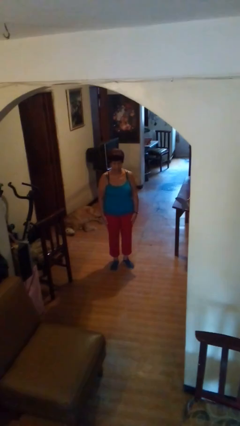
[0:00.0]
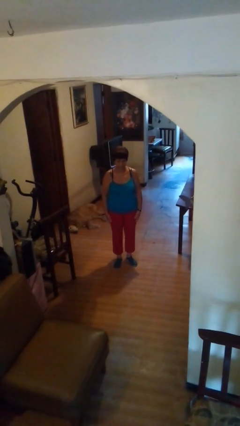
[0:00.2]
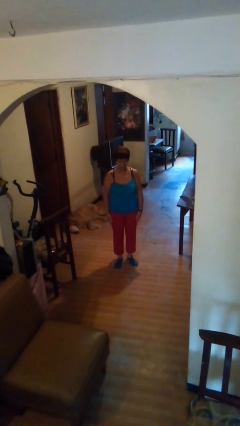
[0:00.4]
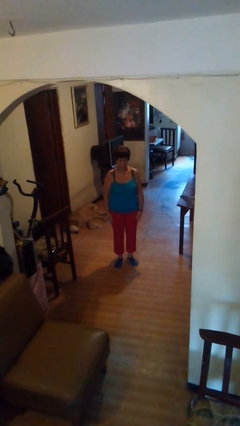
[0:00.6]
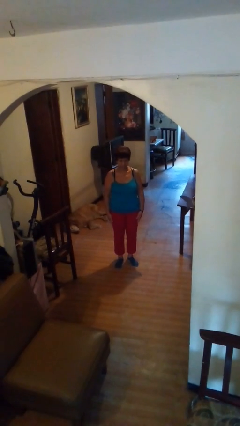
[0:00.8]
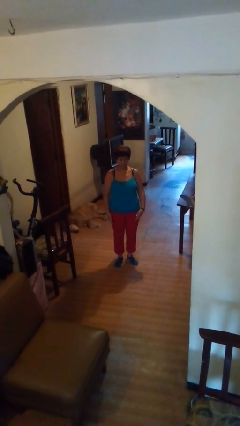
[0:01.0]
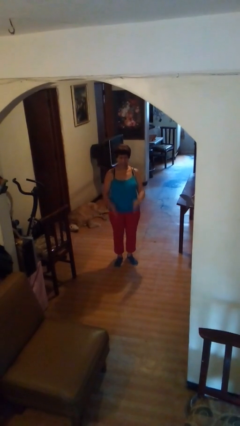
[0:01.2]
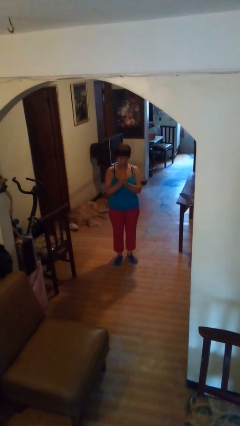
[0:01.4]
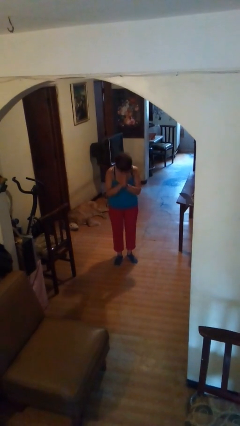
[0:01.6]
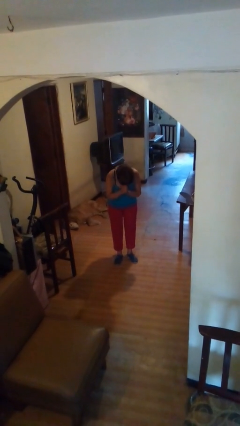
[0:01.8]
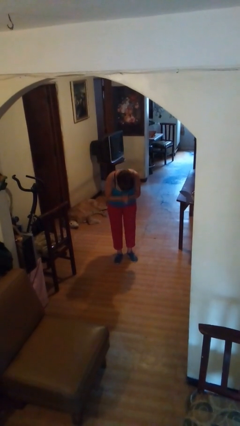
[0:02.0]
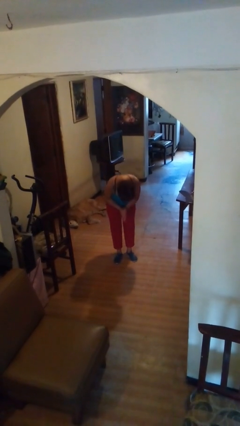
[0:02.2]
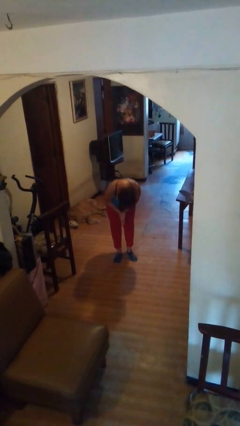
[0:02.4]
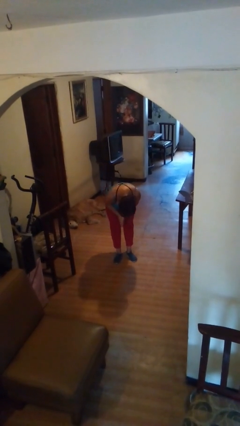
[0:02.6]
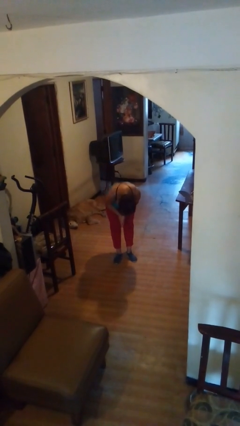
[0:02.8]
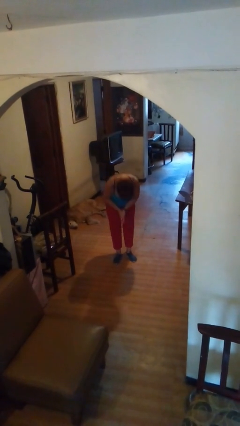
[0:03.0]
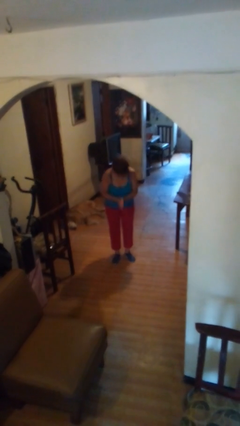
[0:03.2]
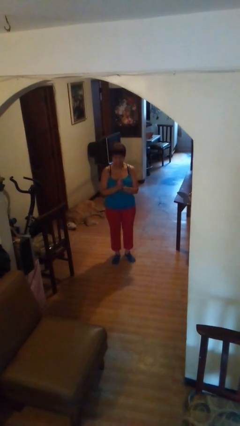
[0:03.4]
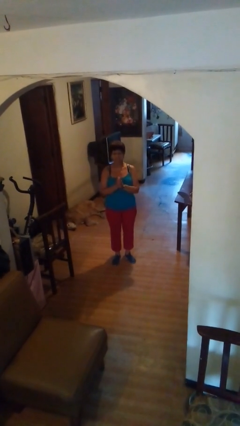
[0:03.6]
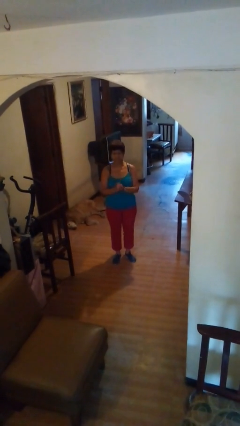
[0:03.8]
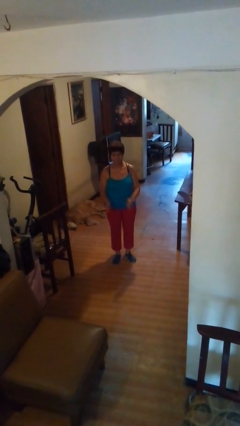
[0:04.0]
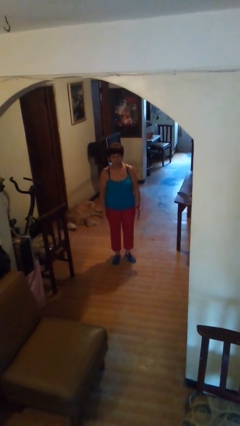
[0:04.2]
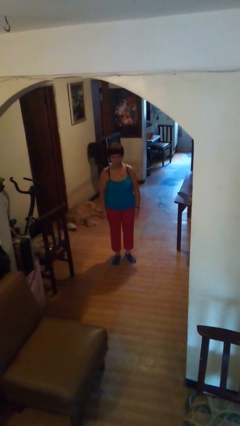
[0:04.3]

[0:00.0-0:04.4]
person bows

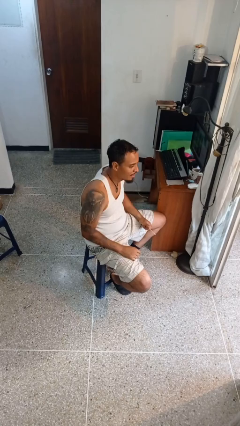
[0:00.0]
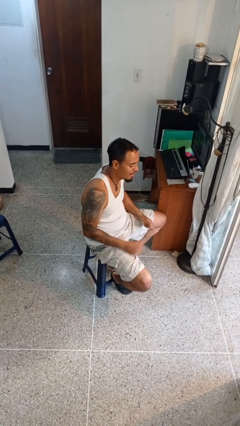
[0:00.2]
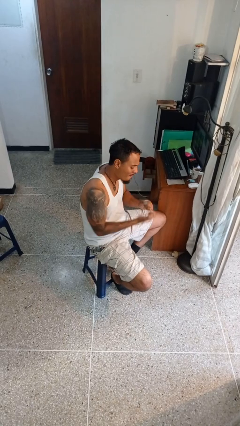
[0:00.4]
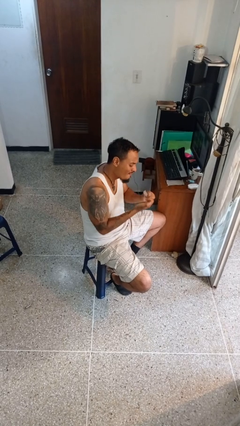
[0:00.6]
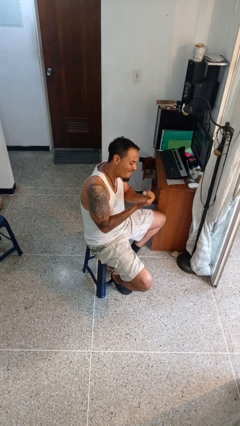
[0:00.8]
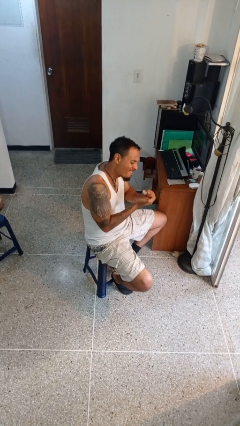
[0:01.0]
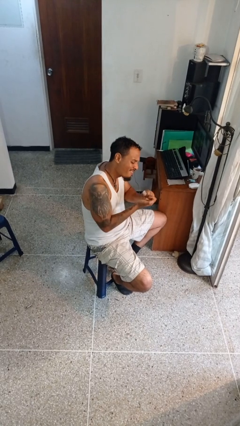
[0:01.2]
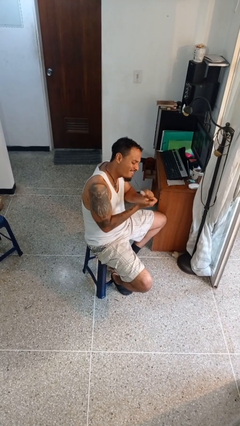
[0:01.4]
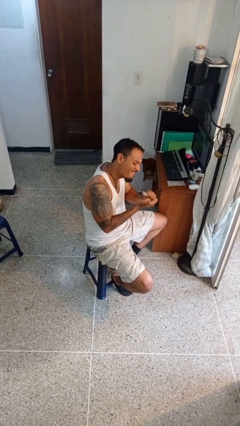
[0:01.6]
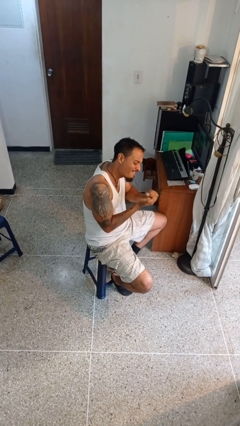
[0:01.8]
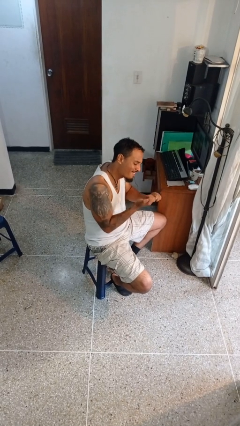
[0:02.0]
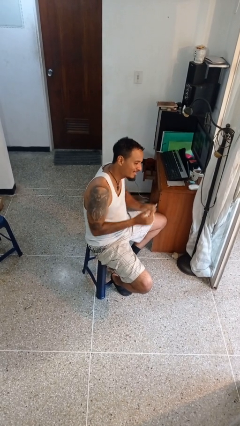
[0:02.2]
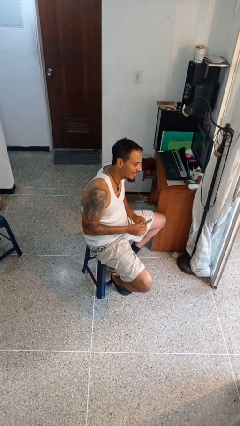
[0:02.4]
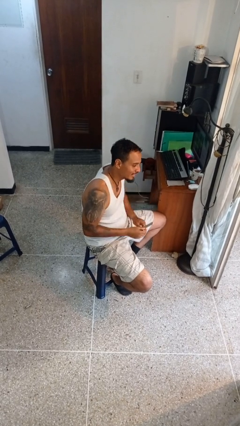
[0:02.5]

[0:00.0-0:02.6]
person files fingernails

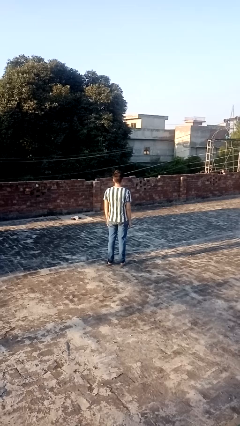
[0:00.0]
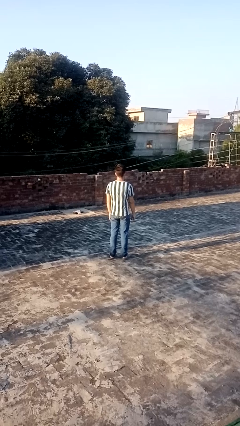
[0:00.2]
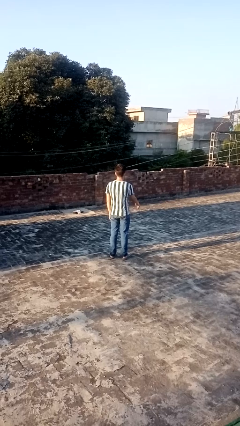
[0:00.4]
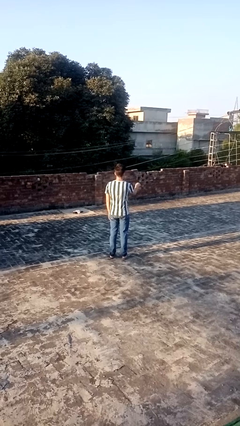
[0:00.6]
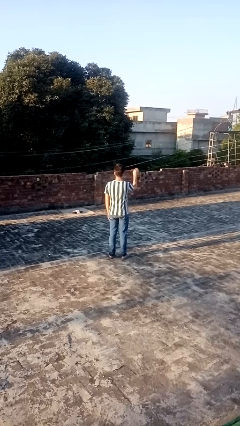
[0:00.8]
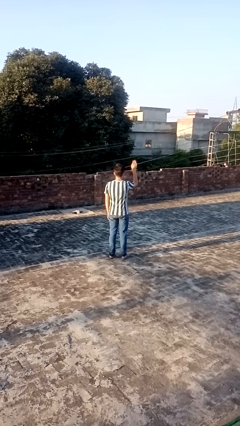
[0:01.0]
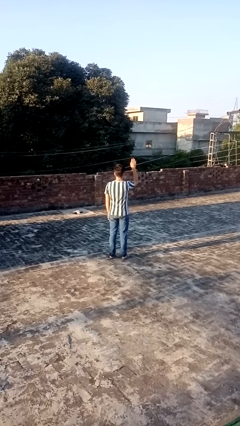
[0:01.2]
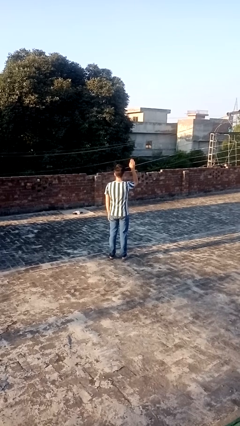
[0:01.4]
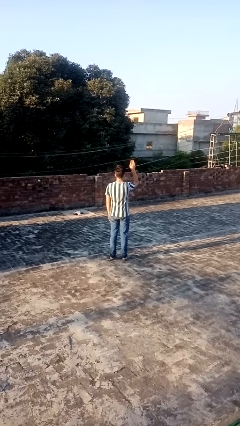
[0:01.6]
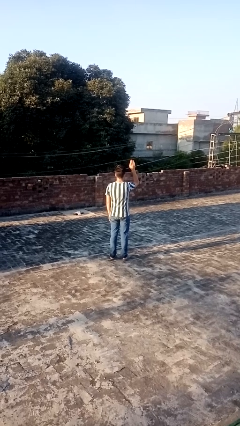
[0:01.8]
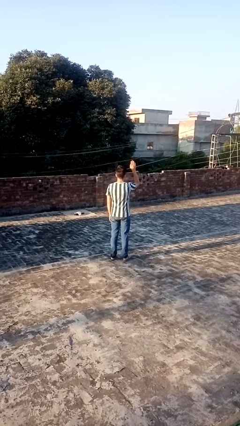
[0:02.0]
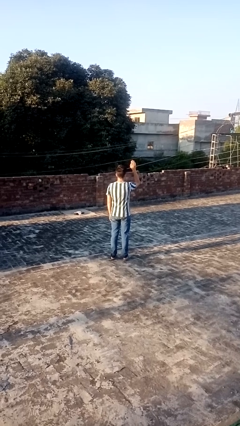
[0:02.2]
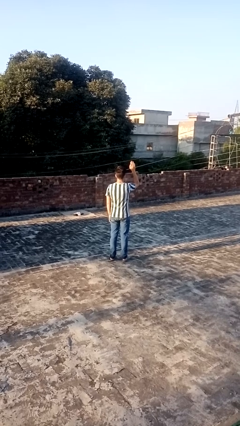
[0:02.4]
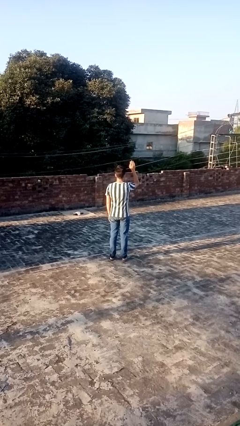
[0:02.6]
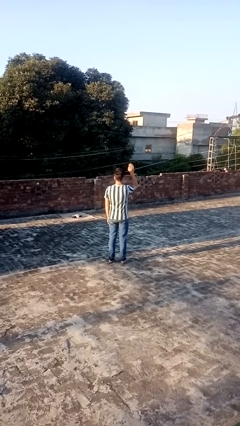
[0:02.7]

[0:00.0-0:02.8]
person gestures raise hand

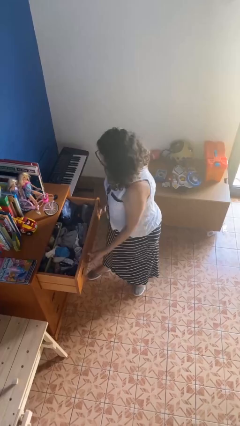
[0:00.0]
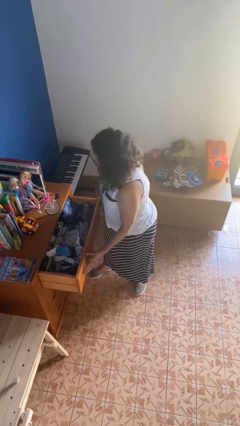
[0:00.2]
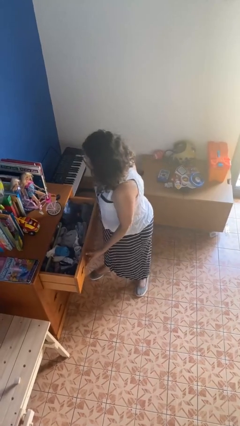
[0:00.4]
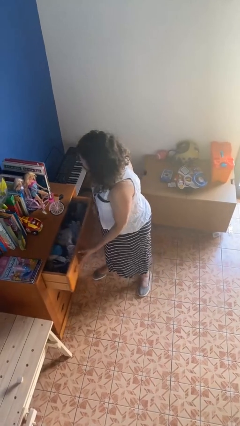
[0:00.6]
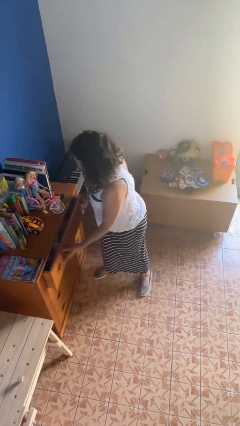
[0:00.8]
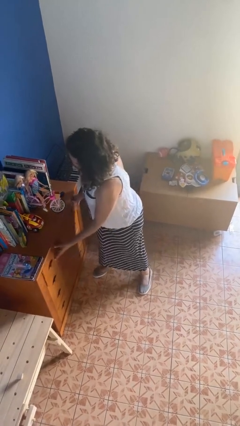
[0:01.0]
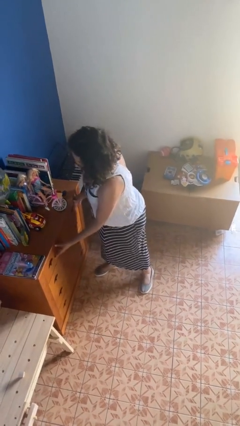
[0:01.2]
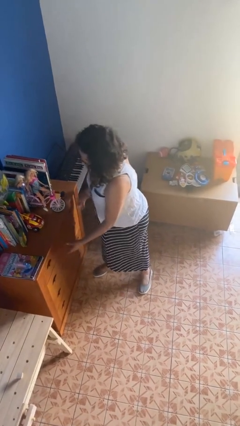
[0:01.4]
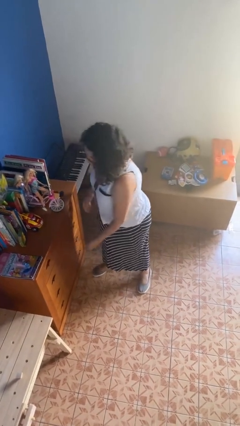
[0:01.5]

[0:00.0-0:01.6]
person closes dresser drawer

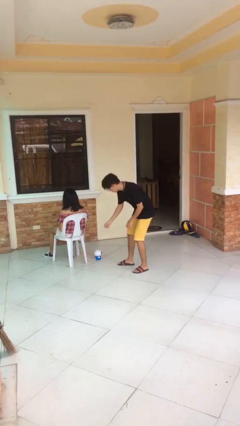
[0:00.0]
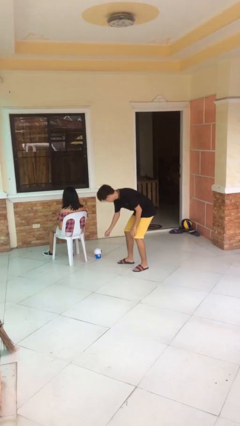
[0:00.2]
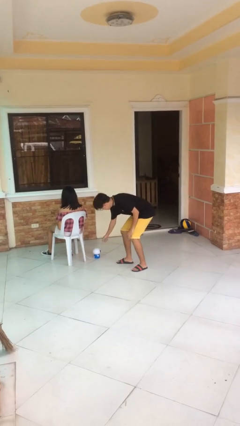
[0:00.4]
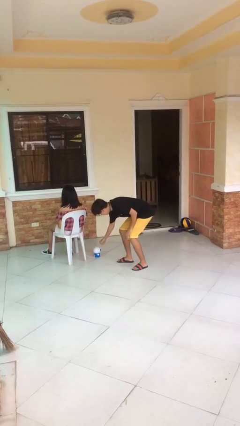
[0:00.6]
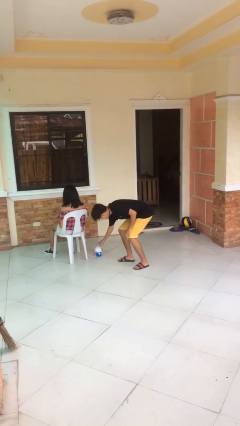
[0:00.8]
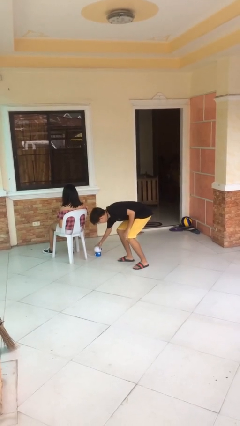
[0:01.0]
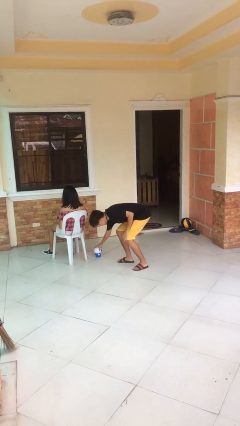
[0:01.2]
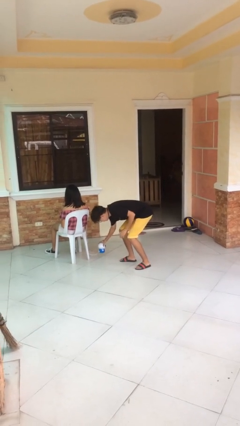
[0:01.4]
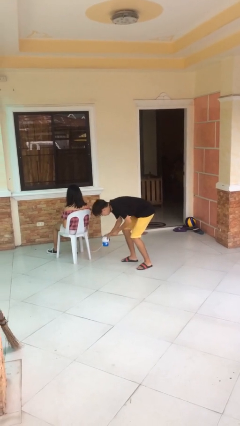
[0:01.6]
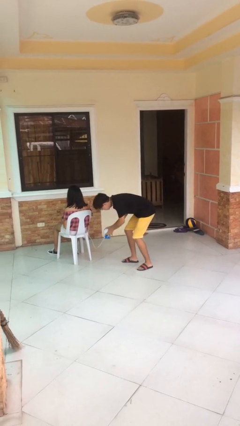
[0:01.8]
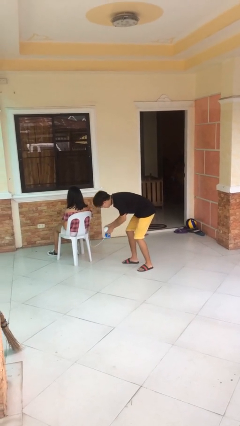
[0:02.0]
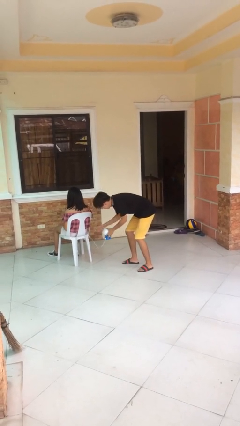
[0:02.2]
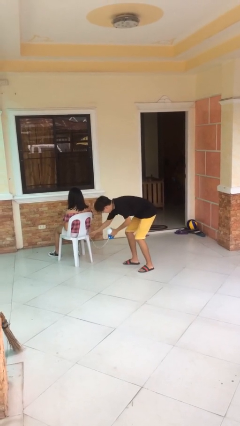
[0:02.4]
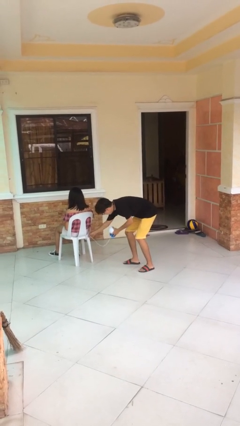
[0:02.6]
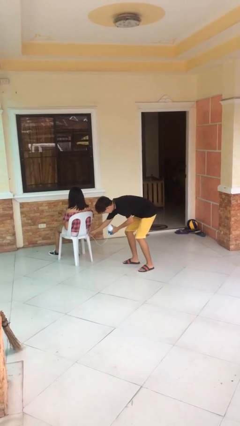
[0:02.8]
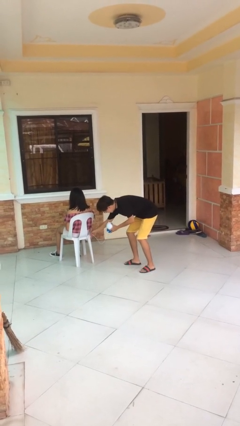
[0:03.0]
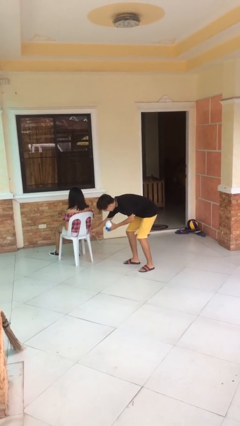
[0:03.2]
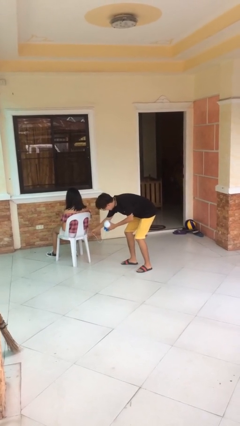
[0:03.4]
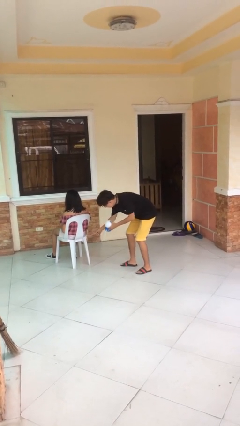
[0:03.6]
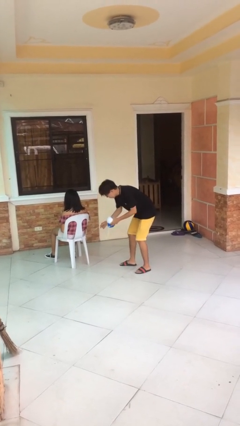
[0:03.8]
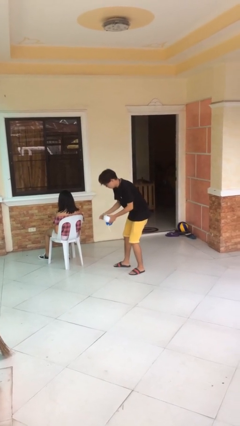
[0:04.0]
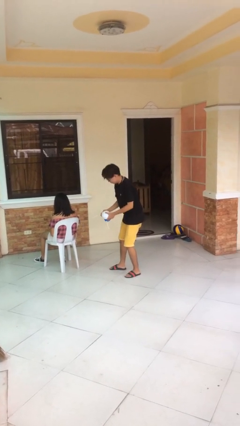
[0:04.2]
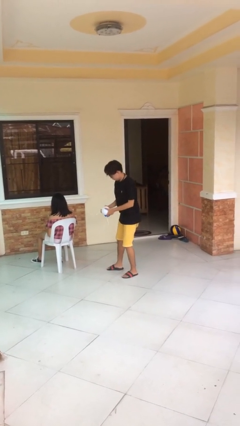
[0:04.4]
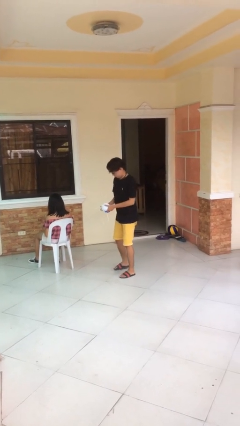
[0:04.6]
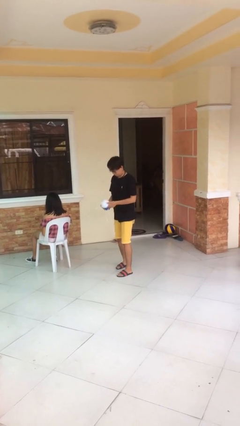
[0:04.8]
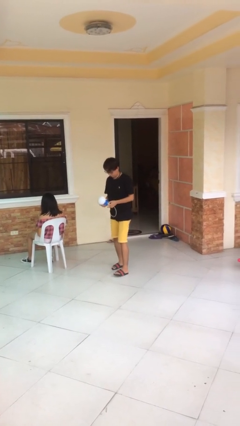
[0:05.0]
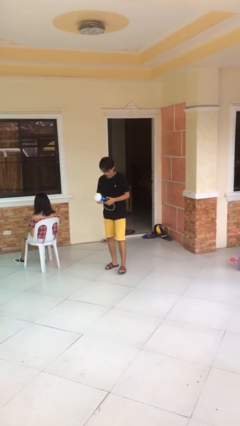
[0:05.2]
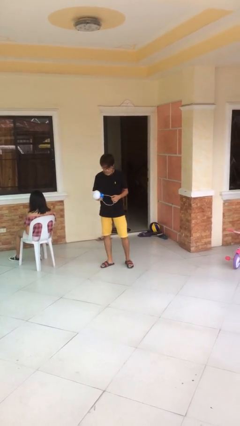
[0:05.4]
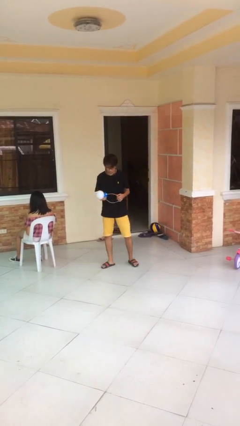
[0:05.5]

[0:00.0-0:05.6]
person steals object from person

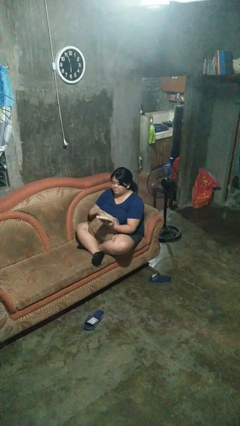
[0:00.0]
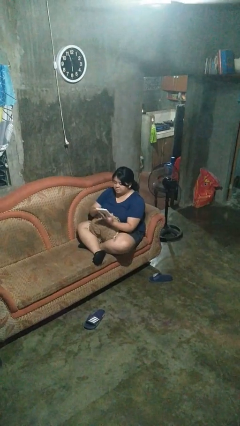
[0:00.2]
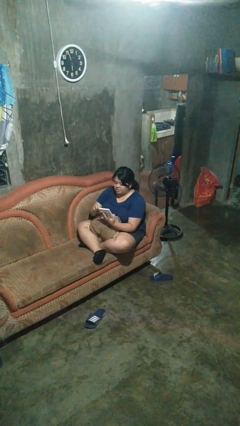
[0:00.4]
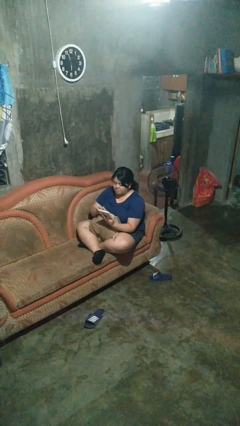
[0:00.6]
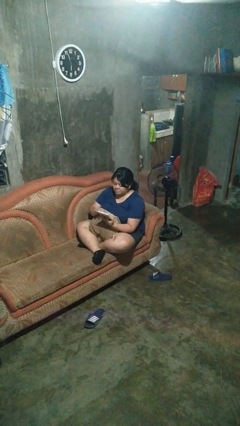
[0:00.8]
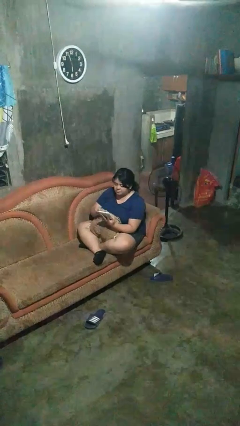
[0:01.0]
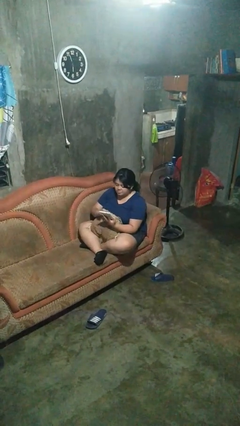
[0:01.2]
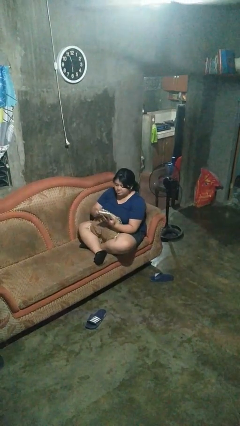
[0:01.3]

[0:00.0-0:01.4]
person interacts with tablet
